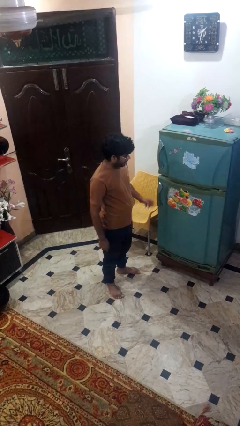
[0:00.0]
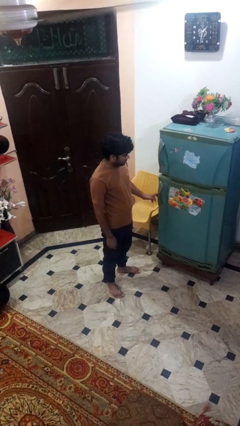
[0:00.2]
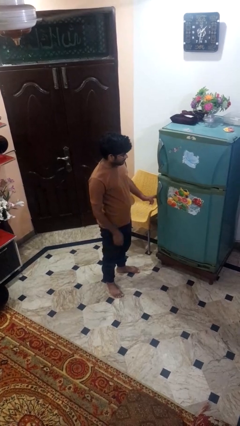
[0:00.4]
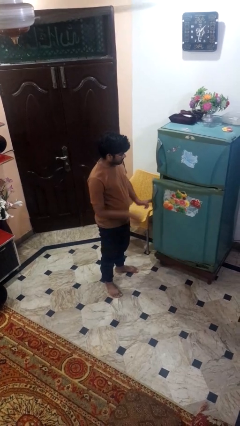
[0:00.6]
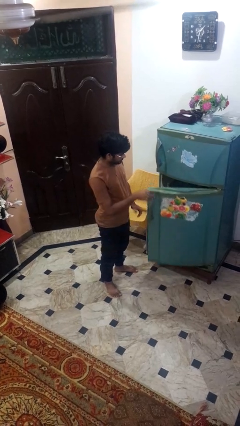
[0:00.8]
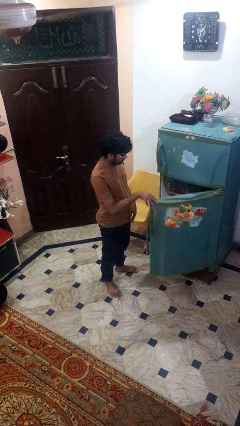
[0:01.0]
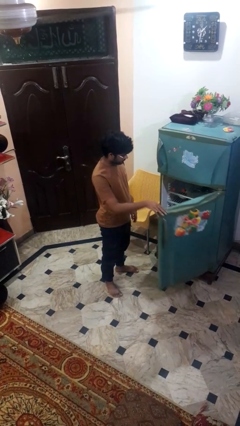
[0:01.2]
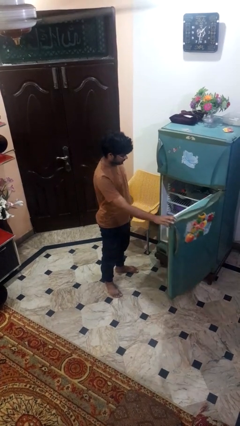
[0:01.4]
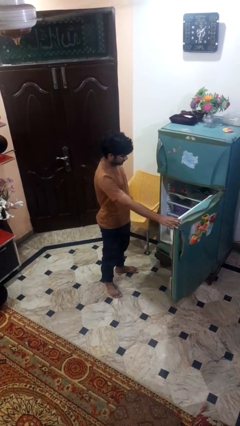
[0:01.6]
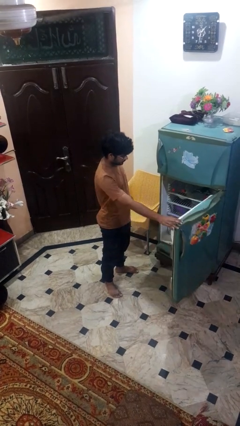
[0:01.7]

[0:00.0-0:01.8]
person opens refrigerator

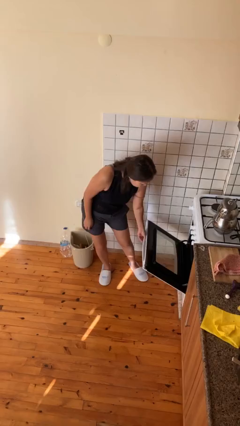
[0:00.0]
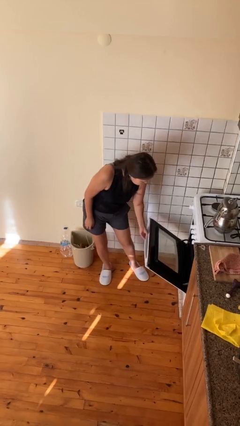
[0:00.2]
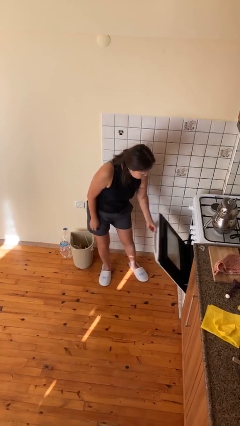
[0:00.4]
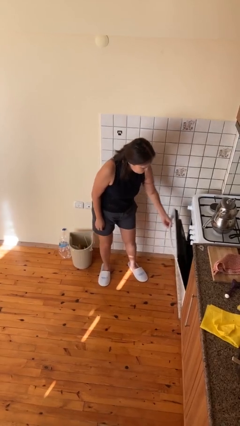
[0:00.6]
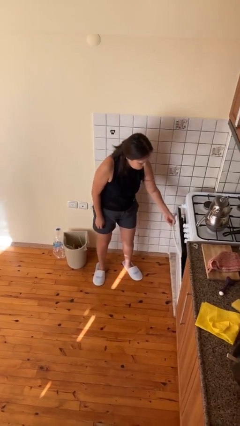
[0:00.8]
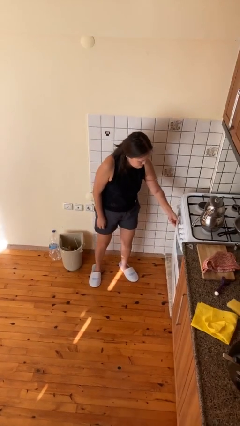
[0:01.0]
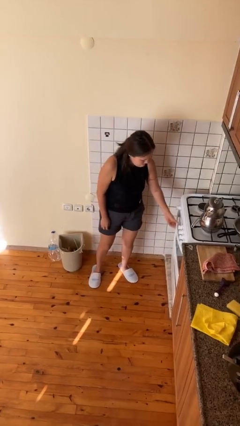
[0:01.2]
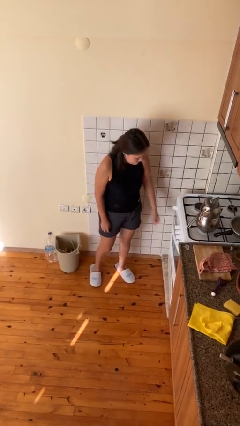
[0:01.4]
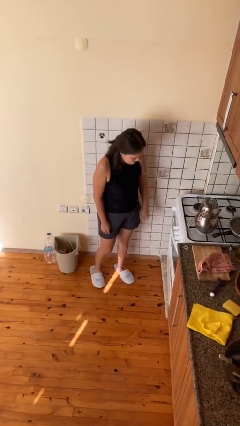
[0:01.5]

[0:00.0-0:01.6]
person closes oven door

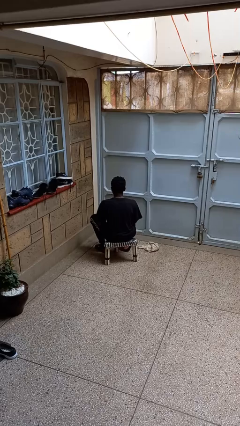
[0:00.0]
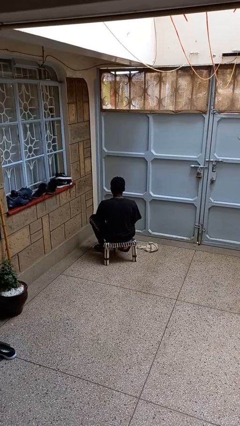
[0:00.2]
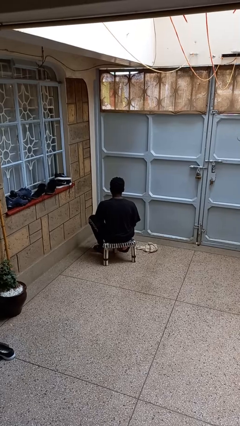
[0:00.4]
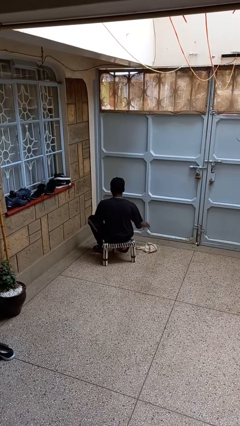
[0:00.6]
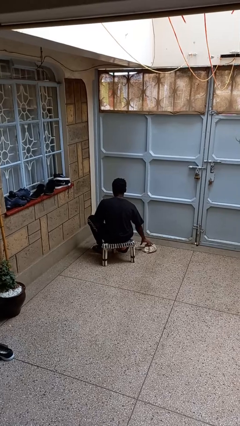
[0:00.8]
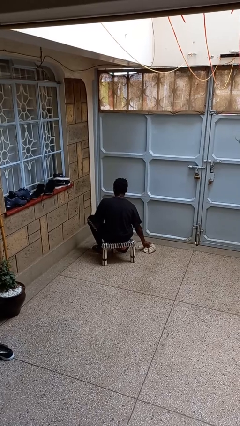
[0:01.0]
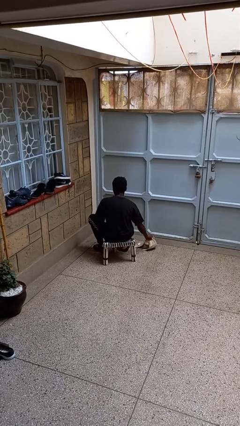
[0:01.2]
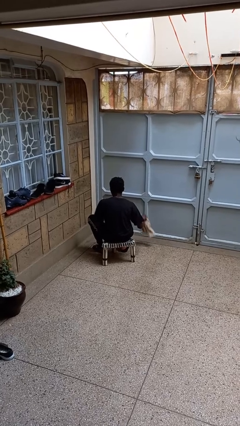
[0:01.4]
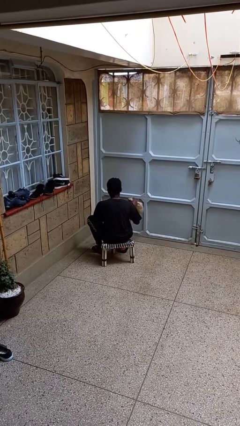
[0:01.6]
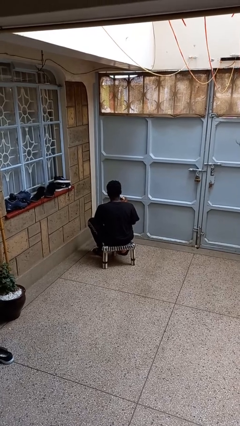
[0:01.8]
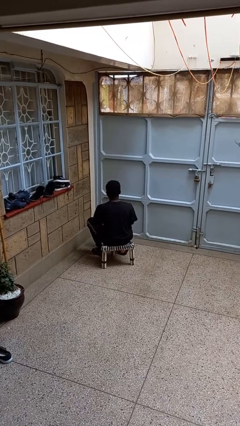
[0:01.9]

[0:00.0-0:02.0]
person picks up object from floor

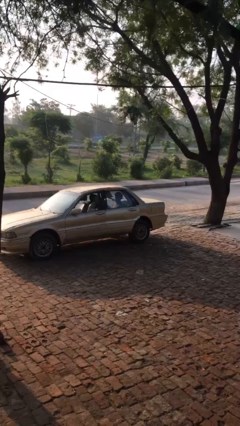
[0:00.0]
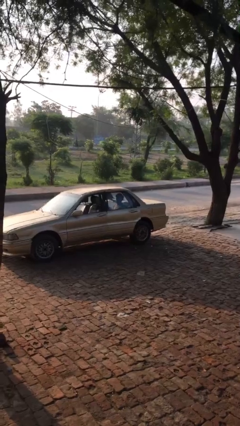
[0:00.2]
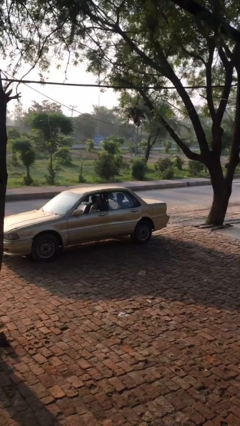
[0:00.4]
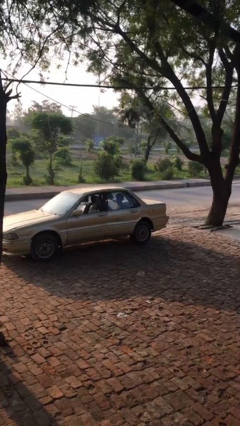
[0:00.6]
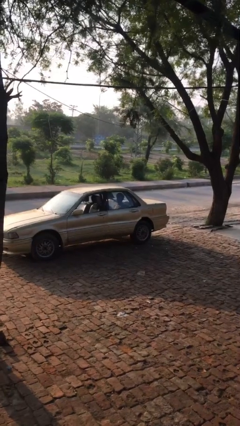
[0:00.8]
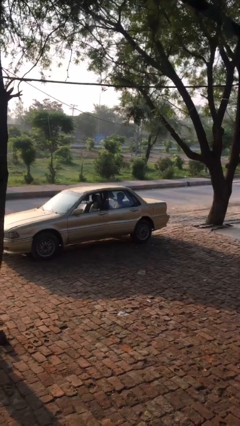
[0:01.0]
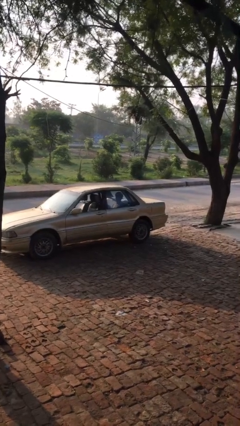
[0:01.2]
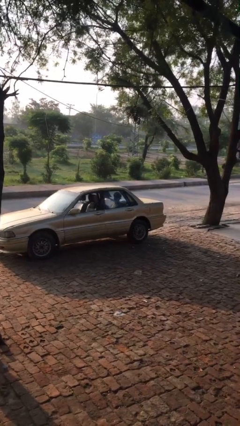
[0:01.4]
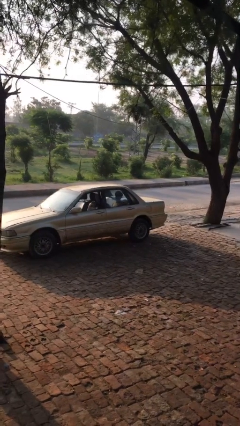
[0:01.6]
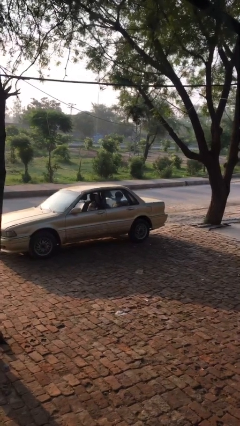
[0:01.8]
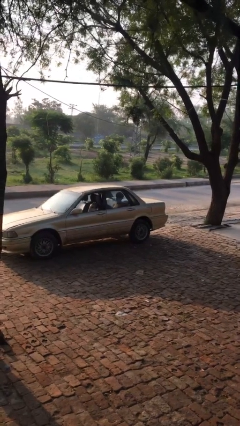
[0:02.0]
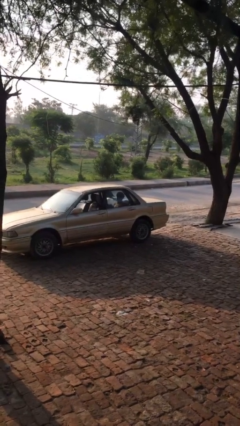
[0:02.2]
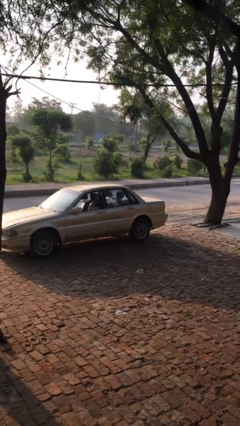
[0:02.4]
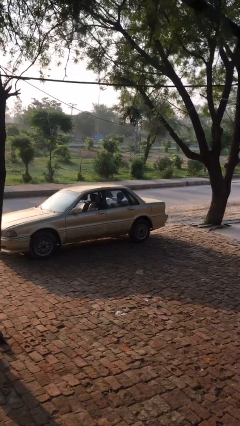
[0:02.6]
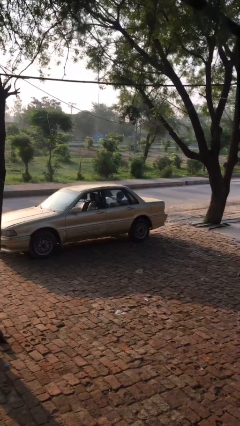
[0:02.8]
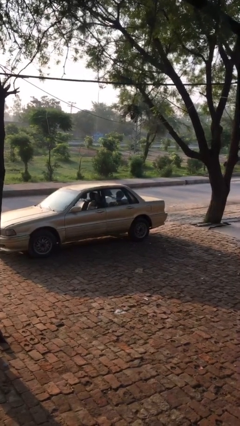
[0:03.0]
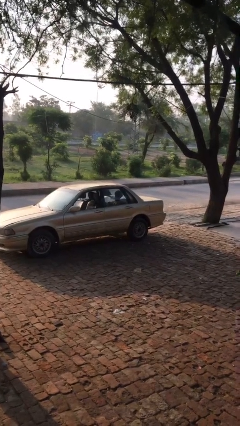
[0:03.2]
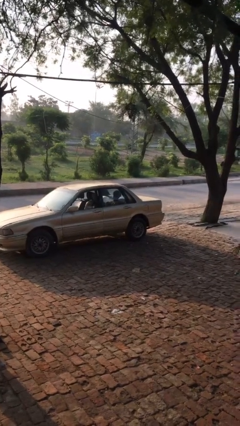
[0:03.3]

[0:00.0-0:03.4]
person closes car door

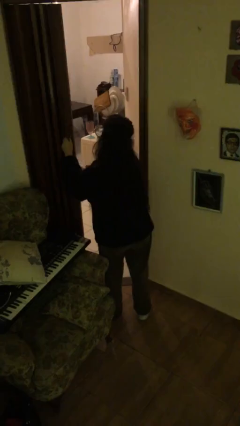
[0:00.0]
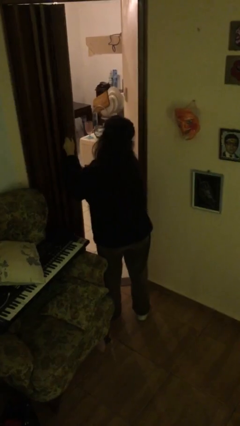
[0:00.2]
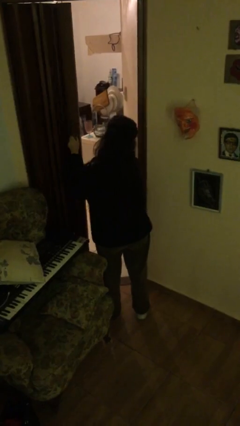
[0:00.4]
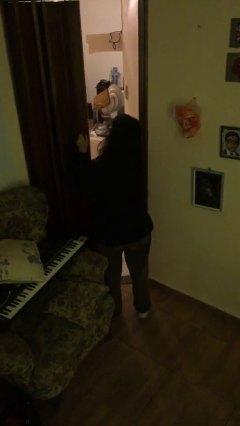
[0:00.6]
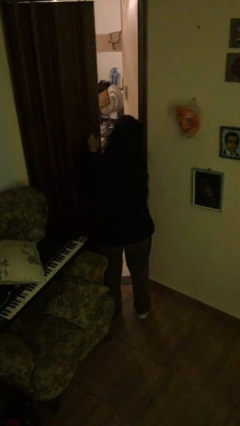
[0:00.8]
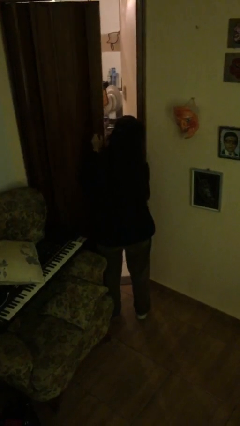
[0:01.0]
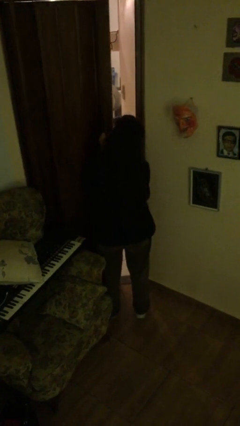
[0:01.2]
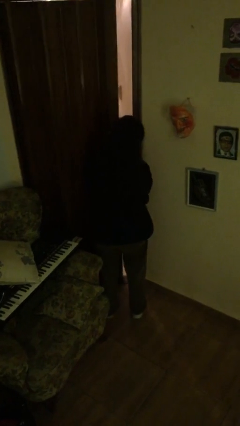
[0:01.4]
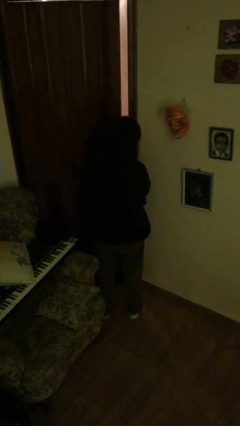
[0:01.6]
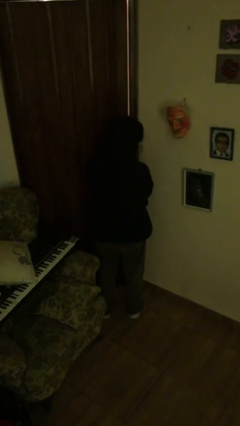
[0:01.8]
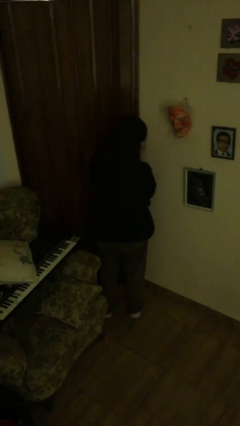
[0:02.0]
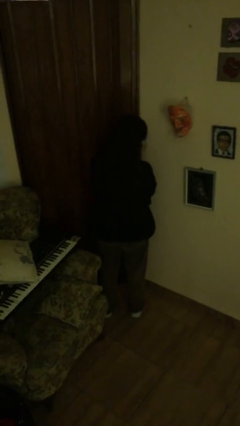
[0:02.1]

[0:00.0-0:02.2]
person closes sliding door

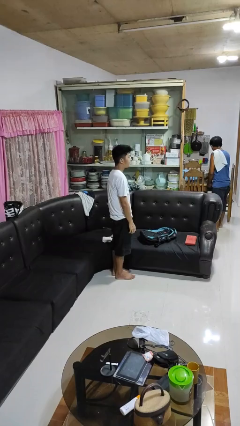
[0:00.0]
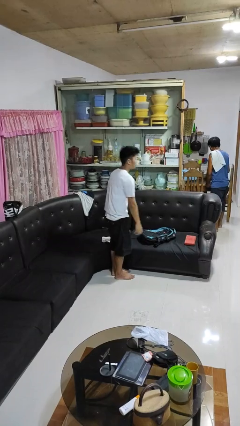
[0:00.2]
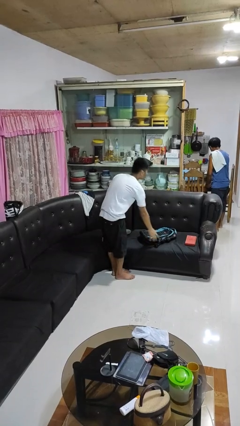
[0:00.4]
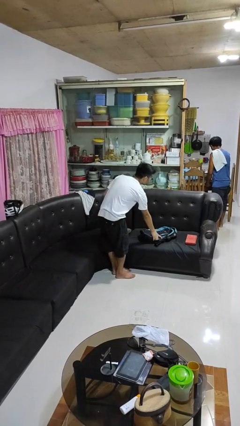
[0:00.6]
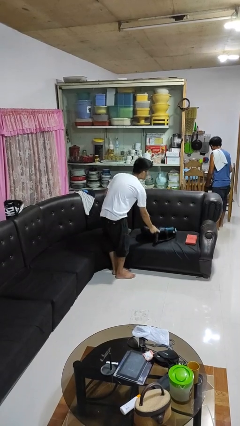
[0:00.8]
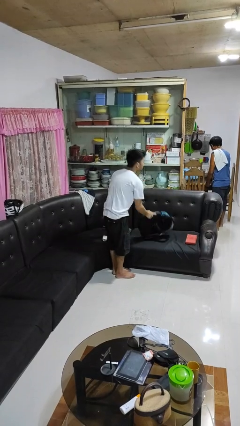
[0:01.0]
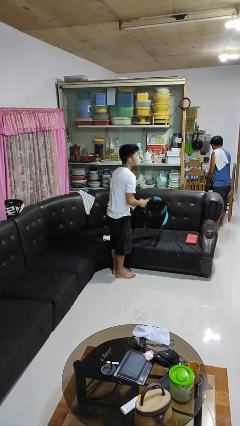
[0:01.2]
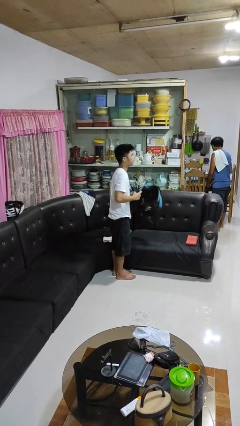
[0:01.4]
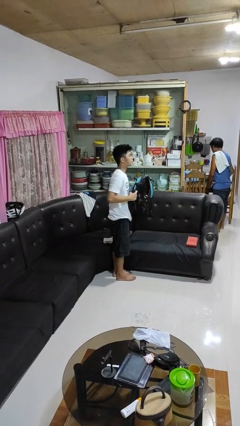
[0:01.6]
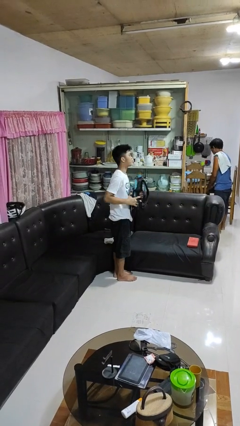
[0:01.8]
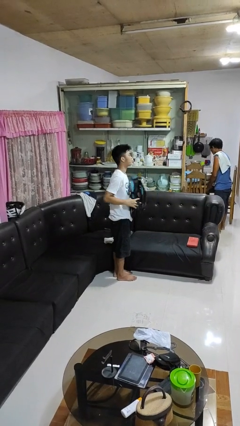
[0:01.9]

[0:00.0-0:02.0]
person puts down object on couch

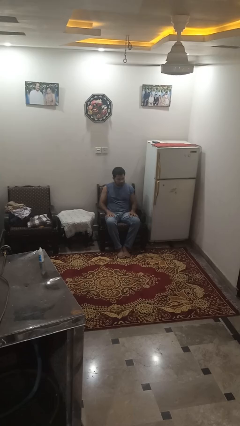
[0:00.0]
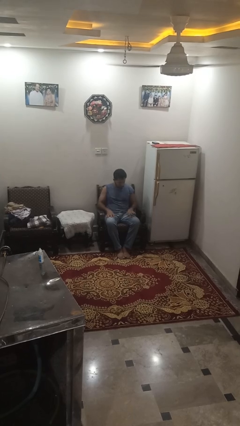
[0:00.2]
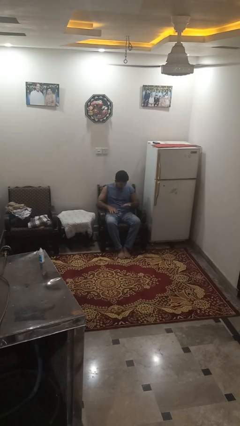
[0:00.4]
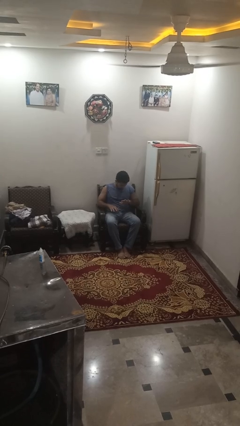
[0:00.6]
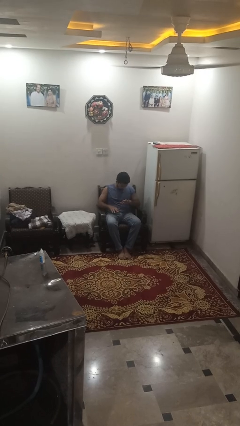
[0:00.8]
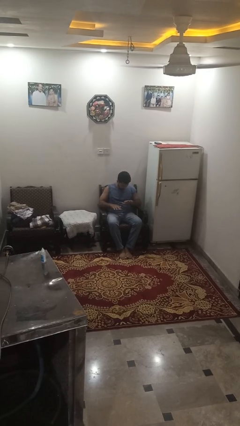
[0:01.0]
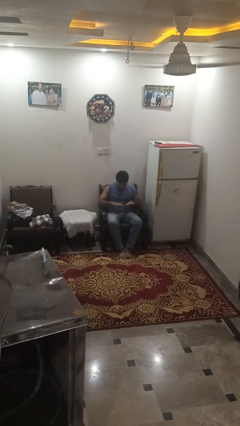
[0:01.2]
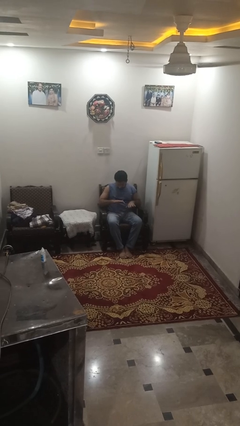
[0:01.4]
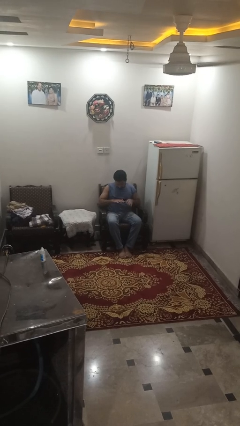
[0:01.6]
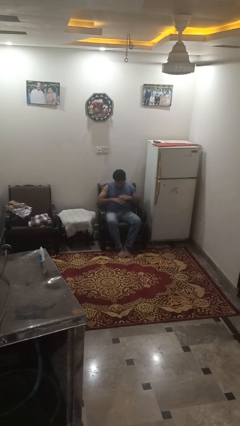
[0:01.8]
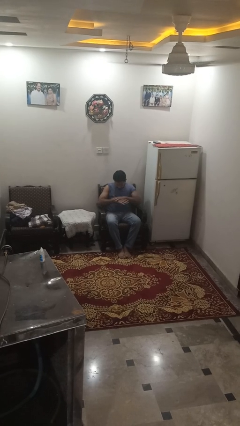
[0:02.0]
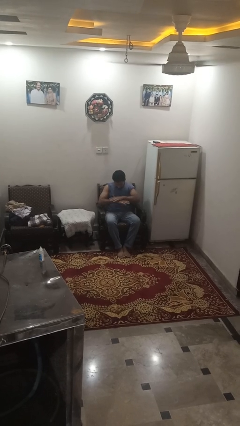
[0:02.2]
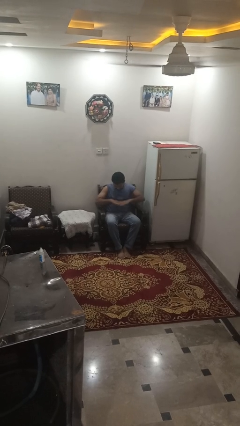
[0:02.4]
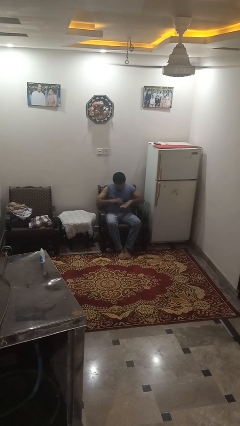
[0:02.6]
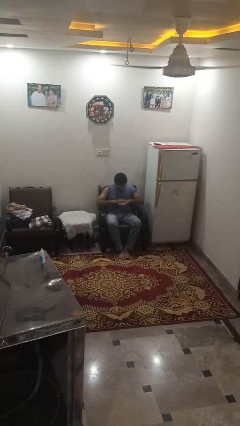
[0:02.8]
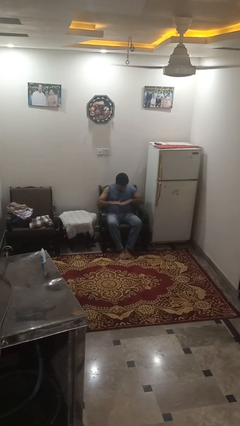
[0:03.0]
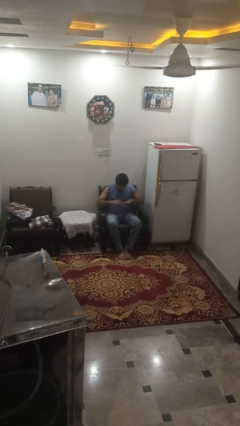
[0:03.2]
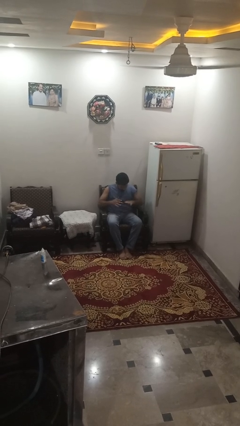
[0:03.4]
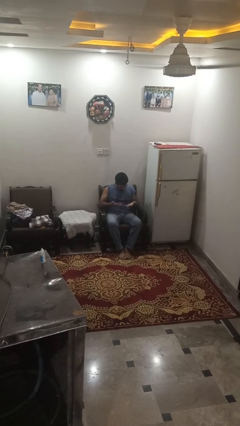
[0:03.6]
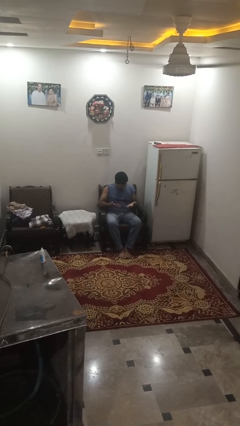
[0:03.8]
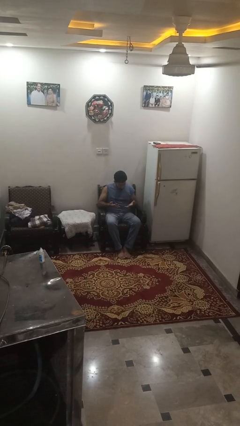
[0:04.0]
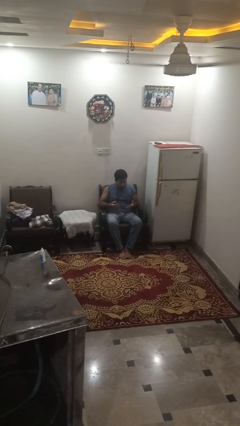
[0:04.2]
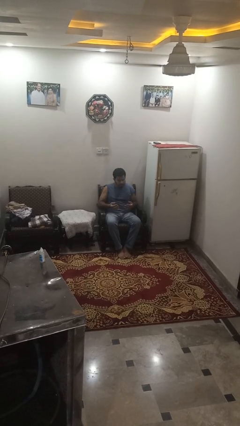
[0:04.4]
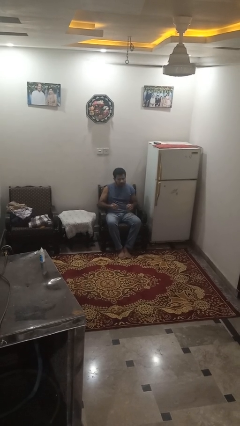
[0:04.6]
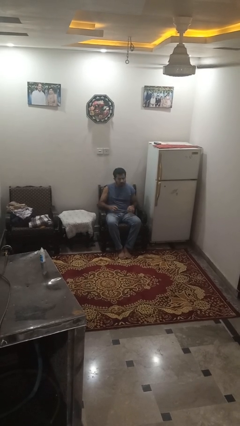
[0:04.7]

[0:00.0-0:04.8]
person looks at hands in lap
